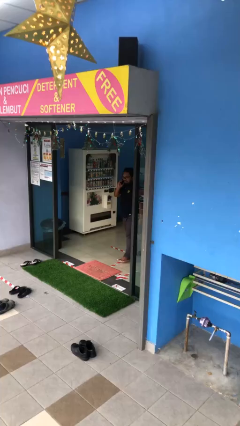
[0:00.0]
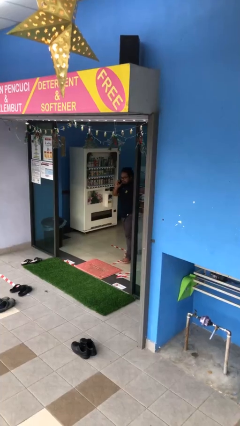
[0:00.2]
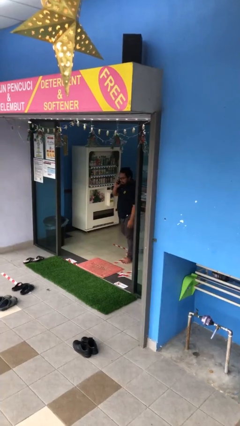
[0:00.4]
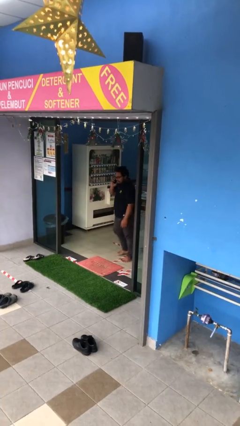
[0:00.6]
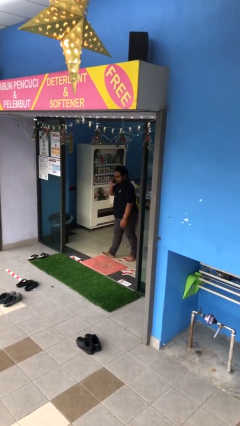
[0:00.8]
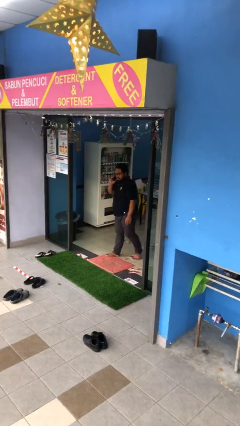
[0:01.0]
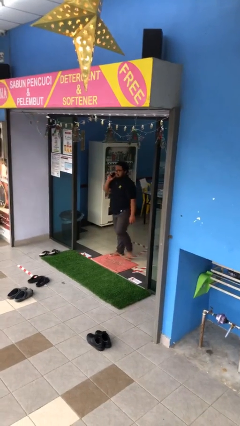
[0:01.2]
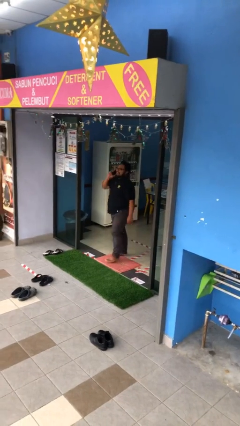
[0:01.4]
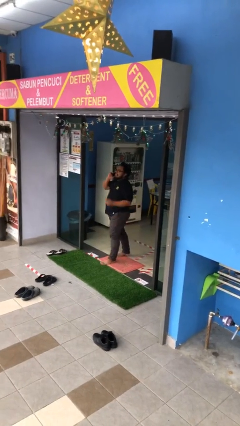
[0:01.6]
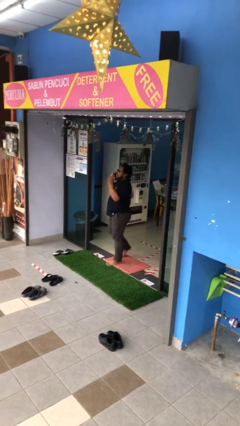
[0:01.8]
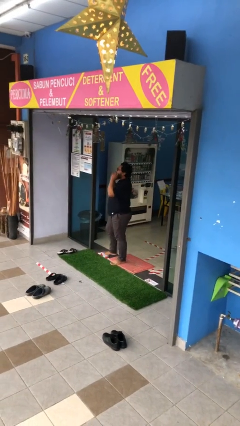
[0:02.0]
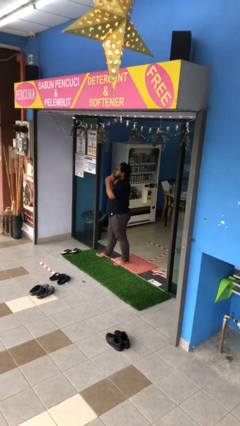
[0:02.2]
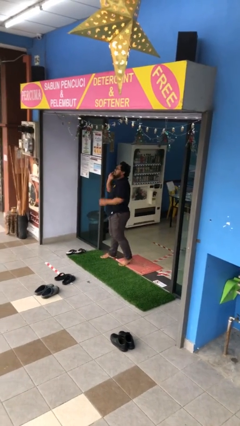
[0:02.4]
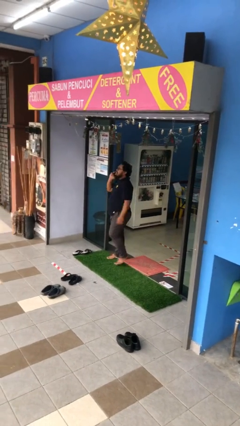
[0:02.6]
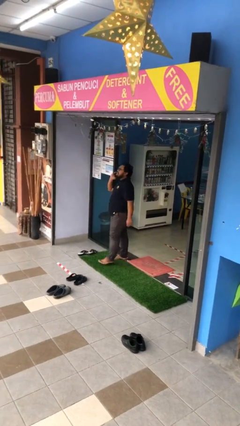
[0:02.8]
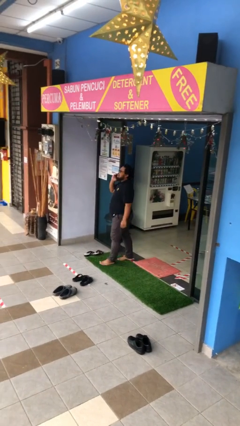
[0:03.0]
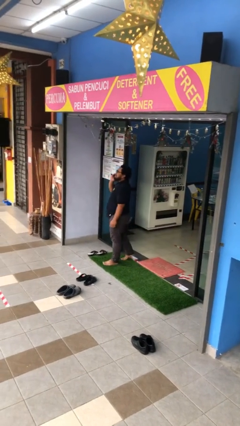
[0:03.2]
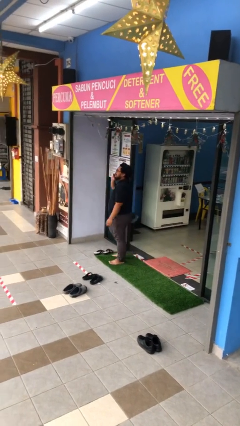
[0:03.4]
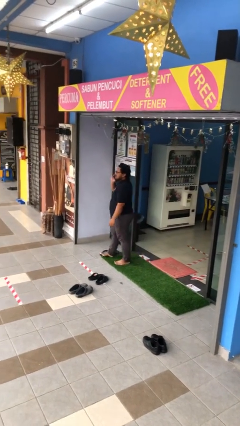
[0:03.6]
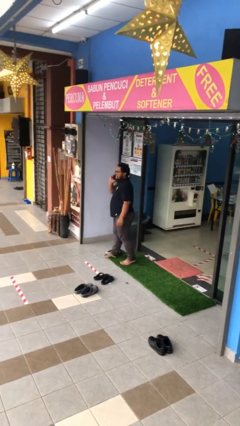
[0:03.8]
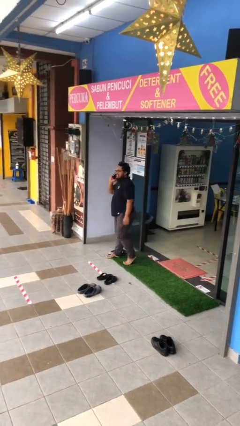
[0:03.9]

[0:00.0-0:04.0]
person enters scene through structure

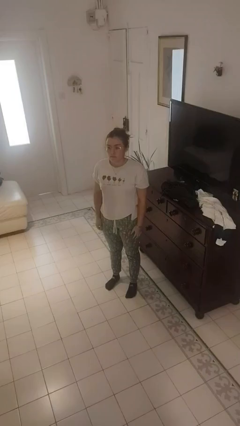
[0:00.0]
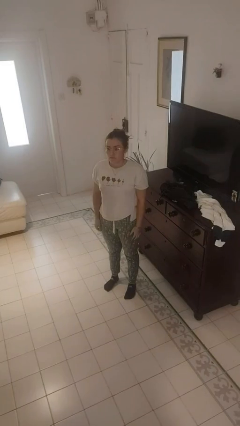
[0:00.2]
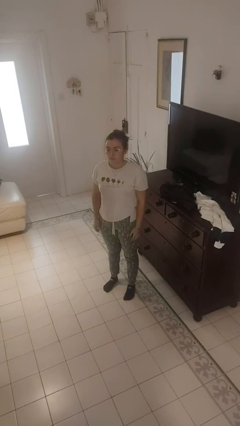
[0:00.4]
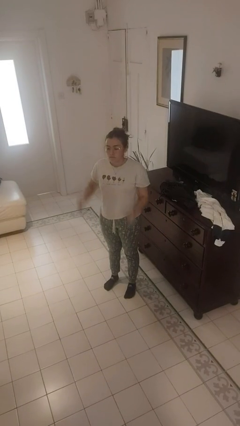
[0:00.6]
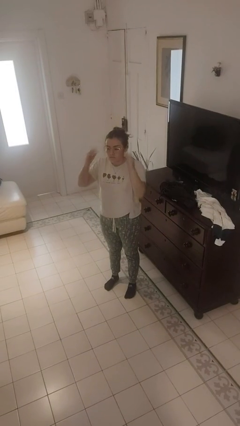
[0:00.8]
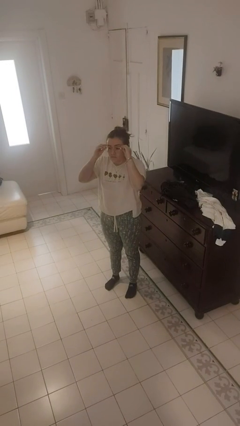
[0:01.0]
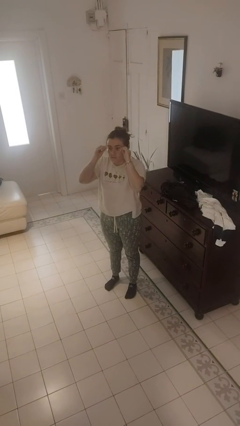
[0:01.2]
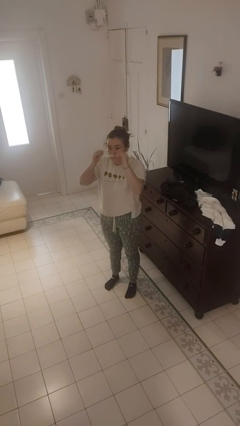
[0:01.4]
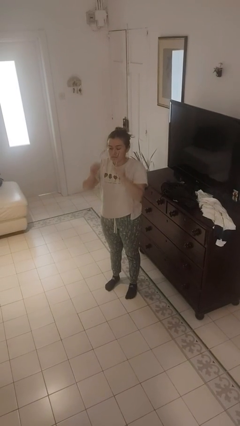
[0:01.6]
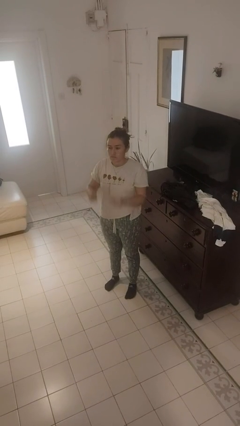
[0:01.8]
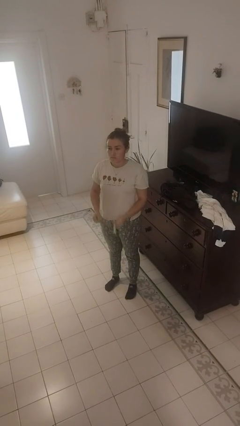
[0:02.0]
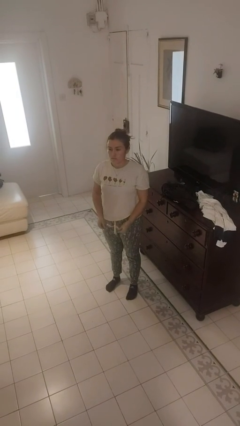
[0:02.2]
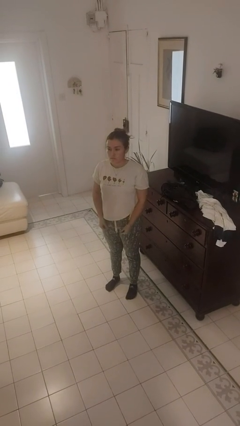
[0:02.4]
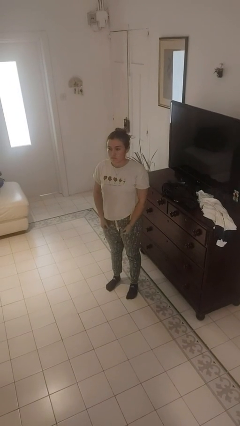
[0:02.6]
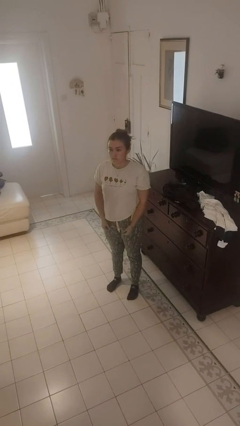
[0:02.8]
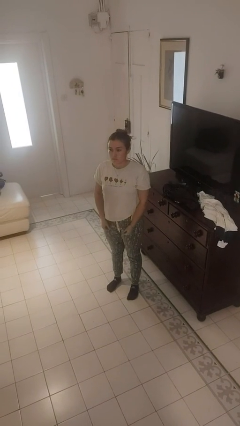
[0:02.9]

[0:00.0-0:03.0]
person takes off glasses

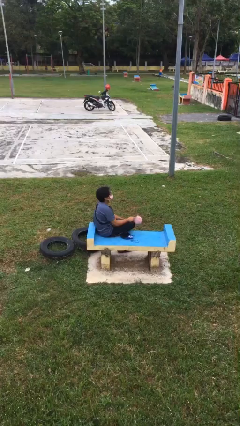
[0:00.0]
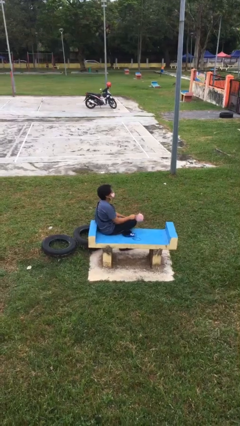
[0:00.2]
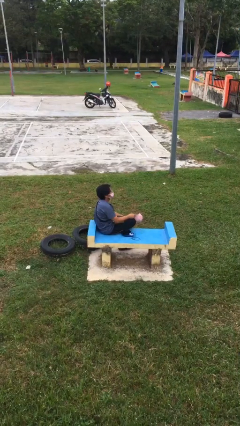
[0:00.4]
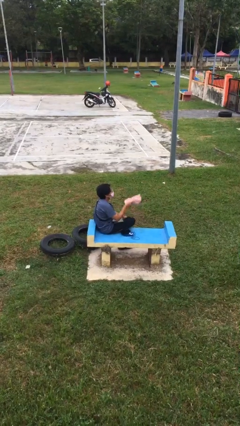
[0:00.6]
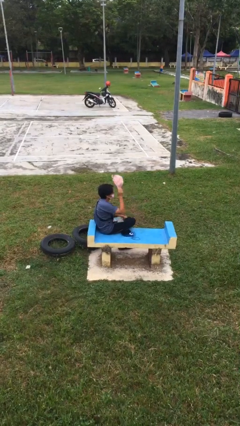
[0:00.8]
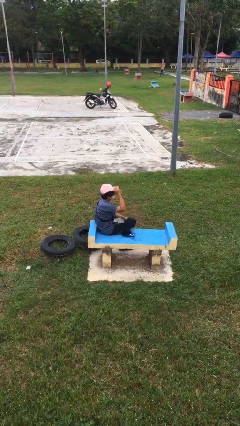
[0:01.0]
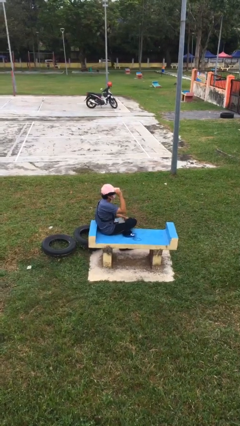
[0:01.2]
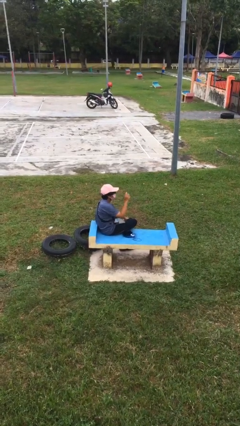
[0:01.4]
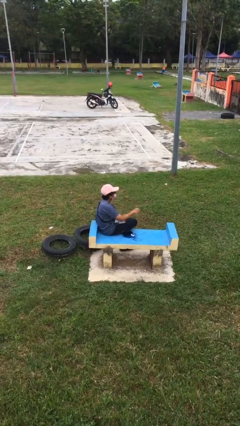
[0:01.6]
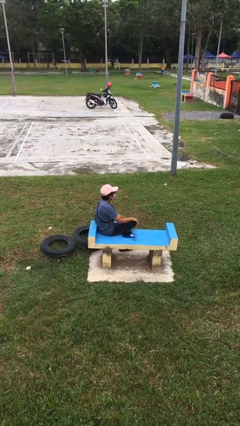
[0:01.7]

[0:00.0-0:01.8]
person puts on hat

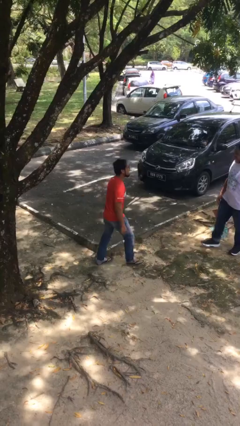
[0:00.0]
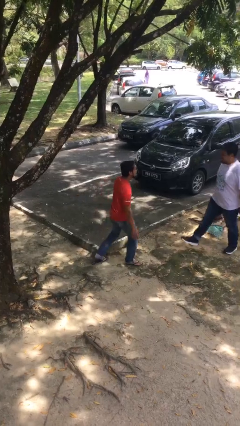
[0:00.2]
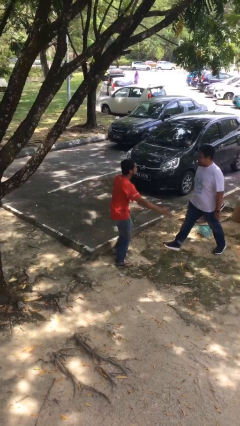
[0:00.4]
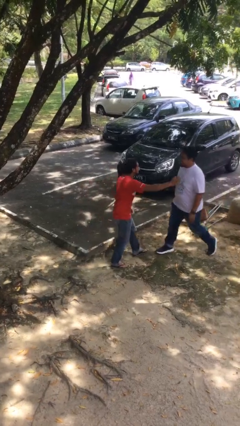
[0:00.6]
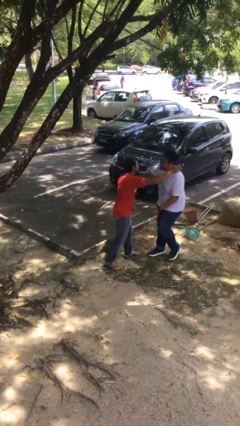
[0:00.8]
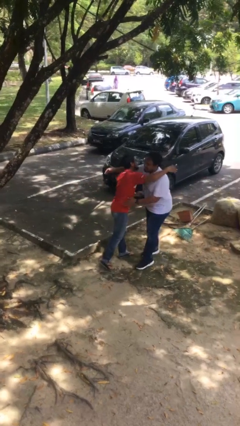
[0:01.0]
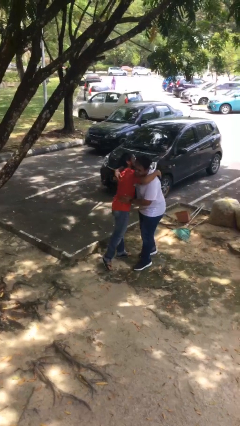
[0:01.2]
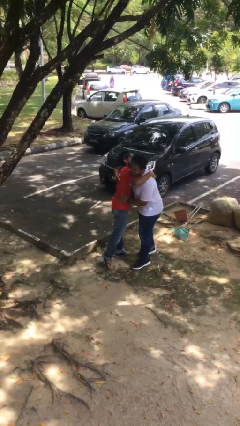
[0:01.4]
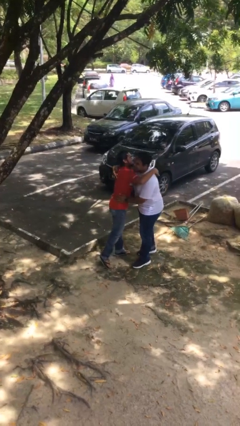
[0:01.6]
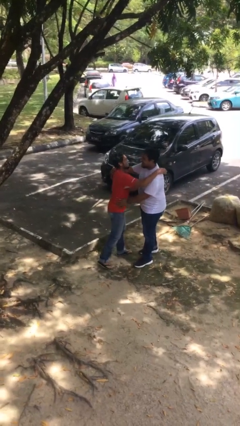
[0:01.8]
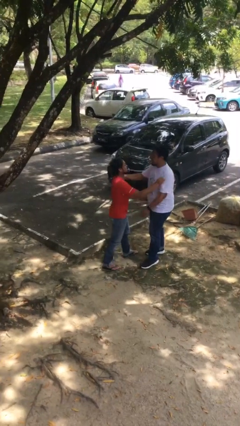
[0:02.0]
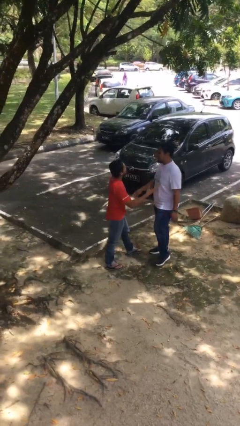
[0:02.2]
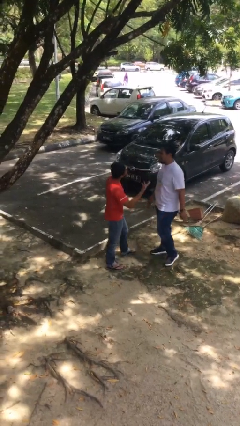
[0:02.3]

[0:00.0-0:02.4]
person embraces person

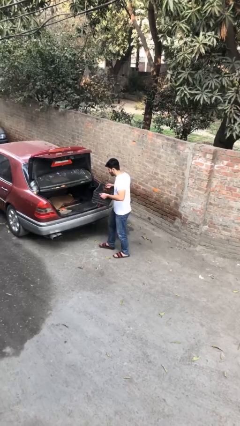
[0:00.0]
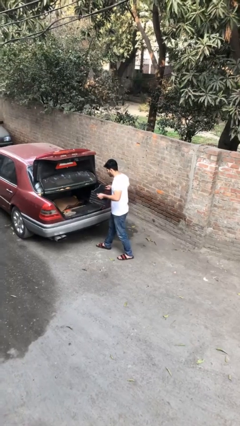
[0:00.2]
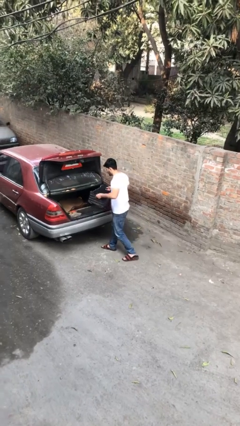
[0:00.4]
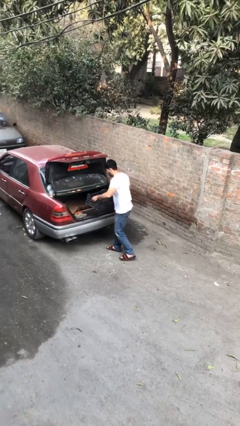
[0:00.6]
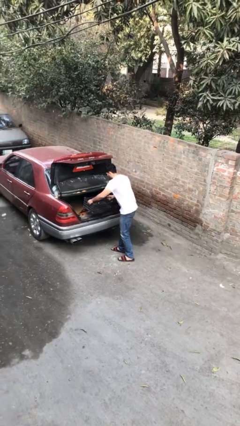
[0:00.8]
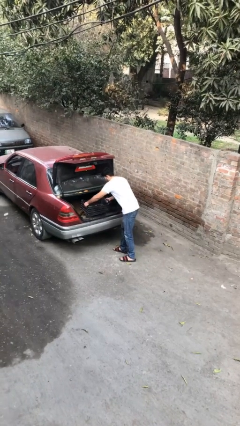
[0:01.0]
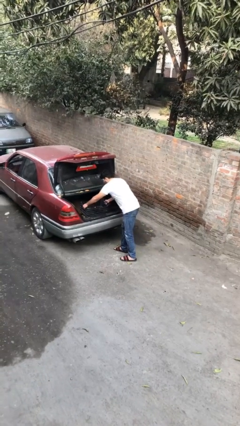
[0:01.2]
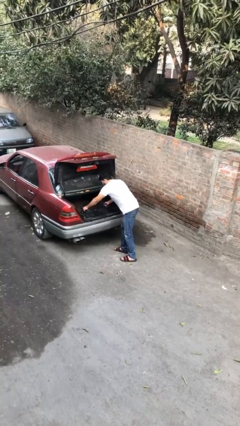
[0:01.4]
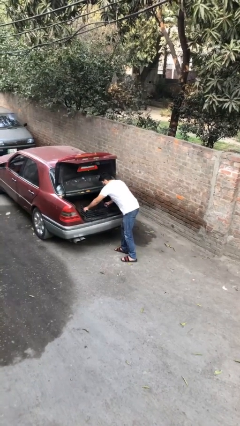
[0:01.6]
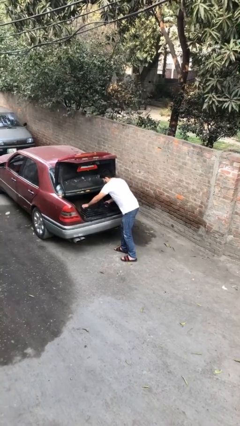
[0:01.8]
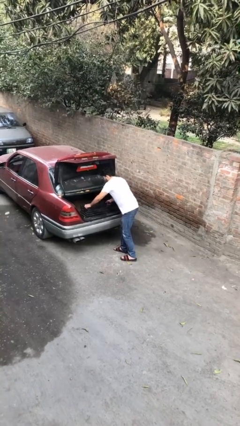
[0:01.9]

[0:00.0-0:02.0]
person loads car

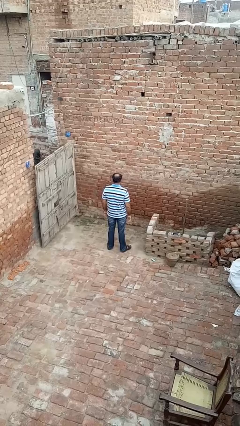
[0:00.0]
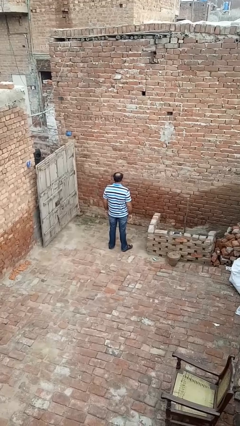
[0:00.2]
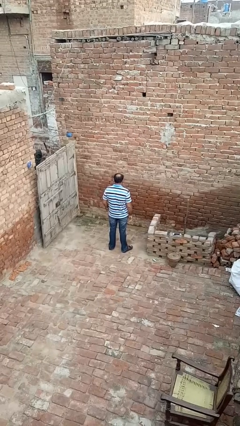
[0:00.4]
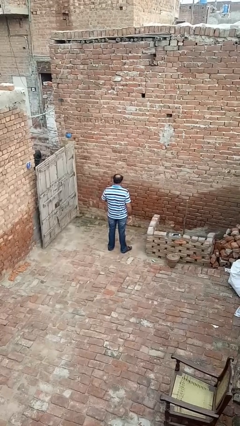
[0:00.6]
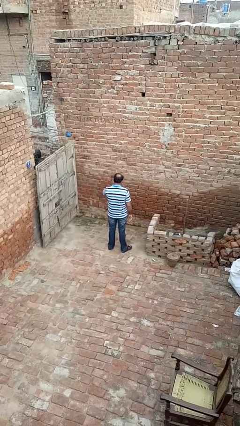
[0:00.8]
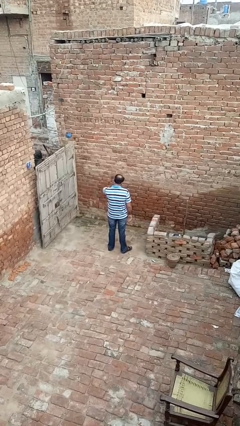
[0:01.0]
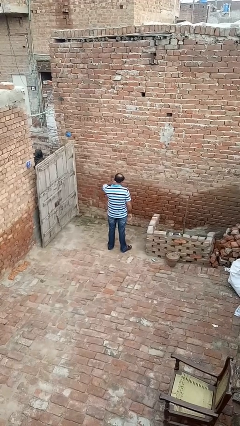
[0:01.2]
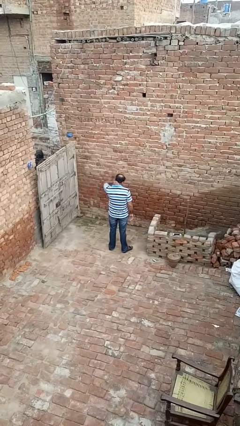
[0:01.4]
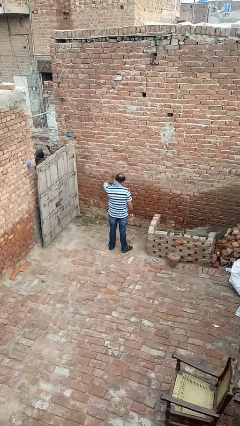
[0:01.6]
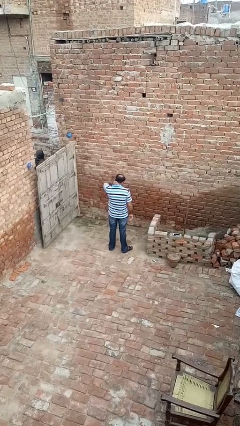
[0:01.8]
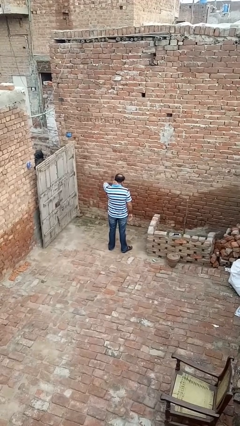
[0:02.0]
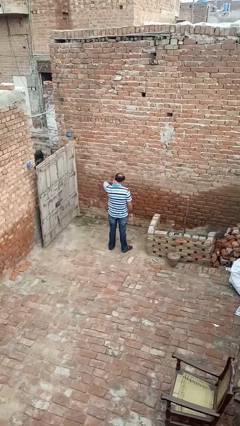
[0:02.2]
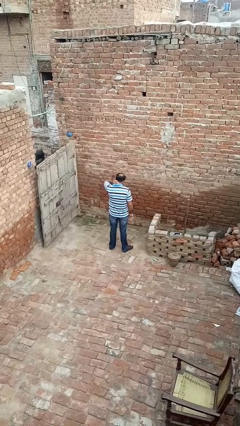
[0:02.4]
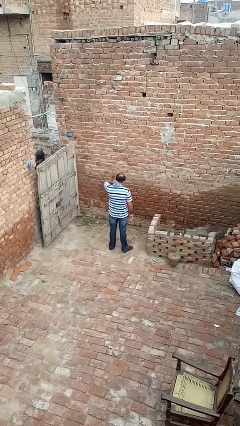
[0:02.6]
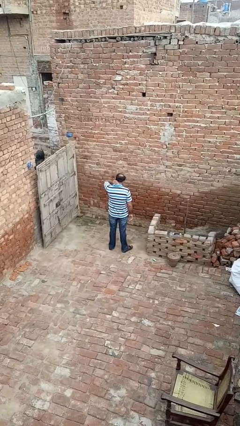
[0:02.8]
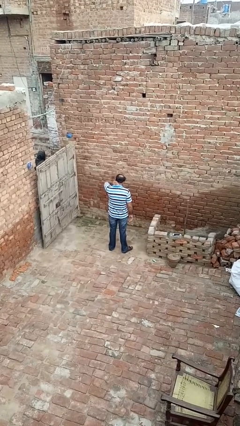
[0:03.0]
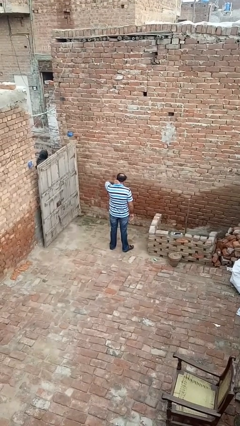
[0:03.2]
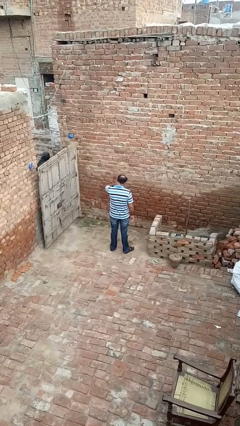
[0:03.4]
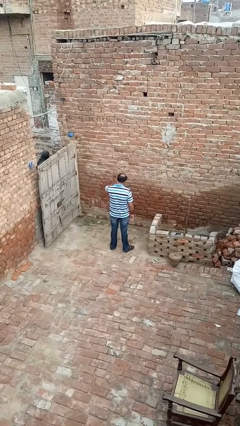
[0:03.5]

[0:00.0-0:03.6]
person rubs neck

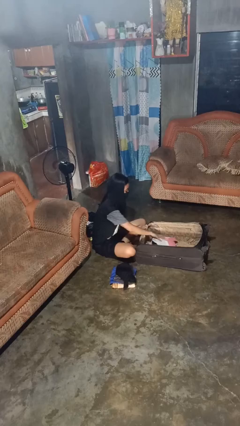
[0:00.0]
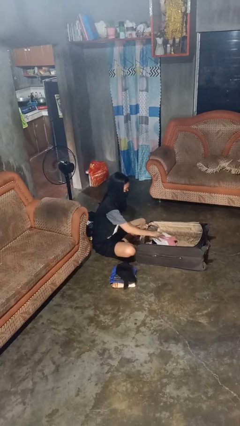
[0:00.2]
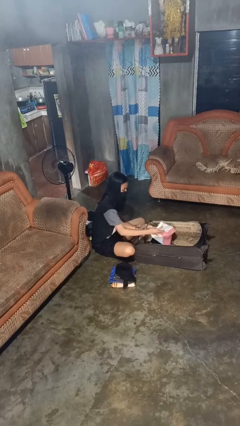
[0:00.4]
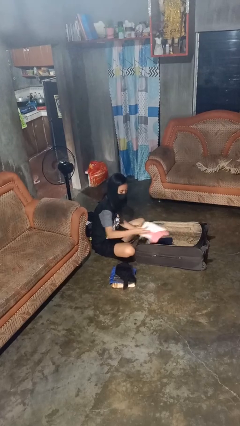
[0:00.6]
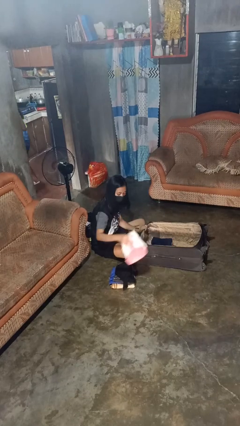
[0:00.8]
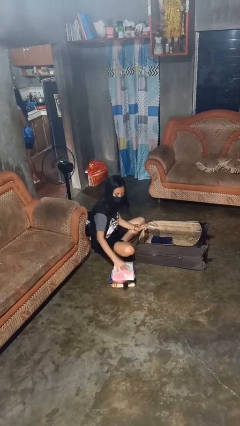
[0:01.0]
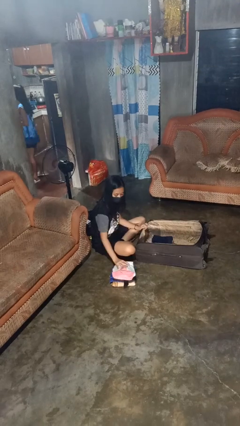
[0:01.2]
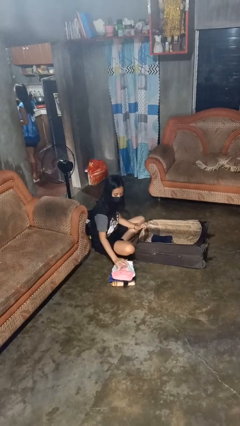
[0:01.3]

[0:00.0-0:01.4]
person unloads clothes from suitcase
